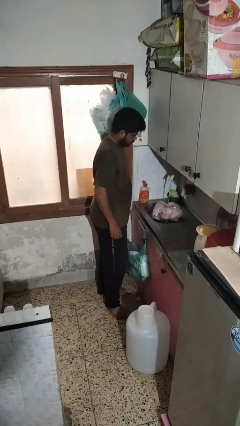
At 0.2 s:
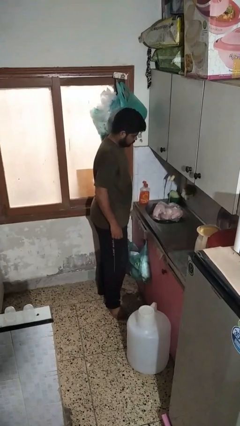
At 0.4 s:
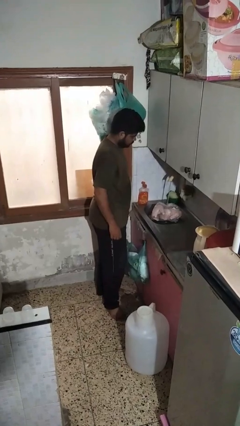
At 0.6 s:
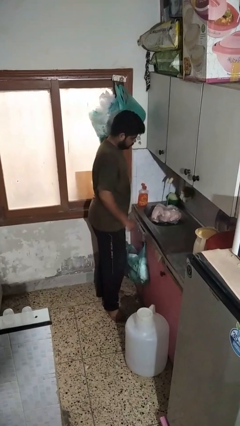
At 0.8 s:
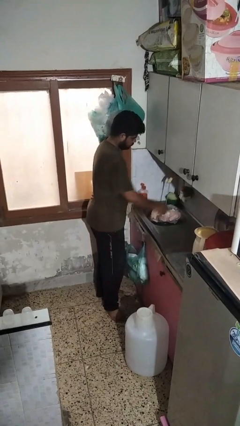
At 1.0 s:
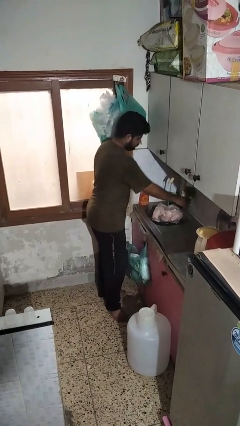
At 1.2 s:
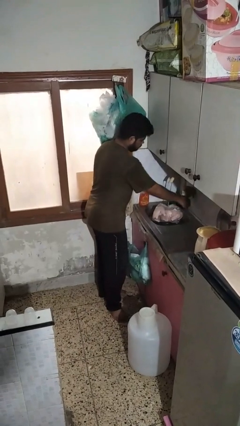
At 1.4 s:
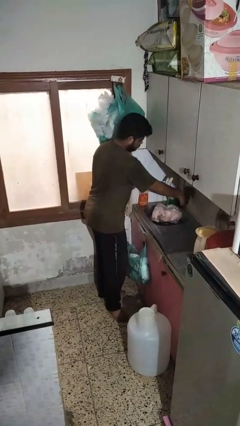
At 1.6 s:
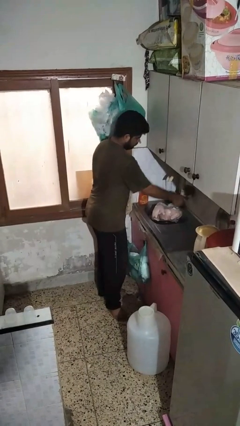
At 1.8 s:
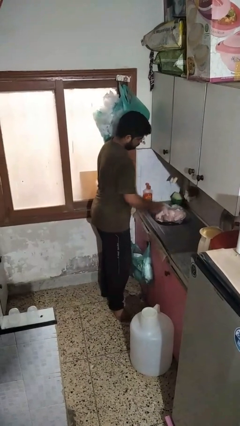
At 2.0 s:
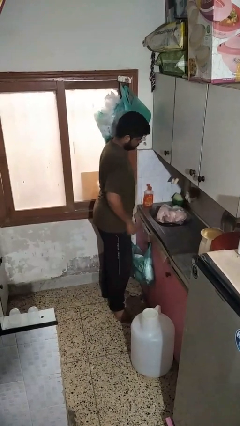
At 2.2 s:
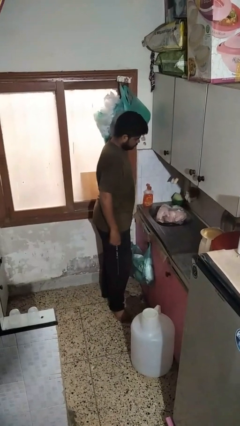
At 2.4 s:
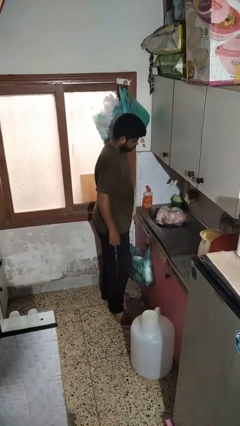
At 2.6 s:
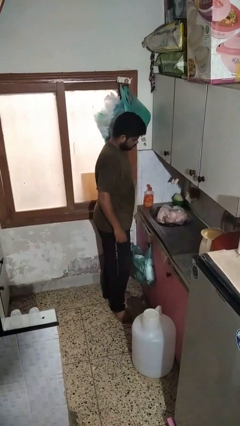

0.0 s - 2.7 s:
person turns off faucet

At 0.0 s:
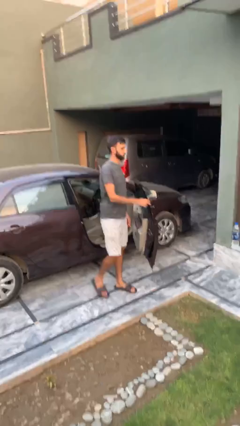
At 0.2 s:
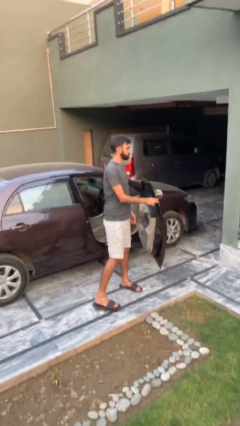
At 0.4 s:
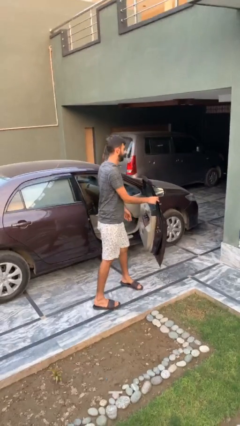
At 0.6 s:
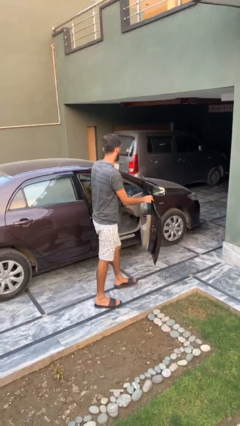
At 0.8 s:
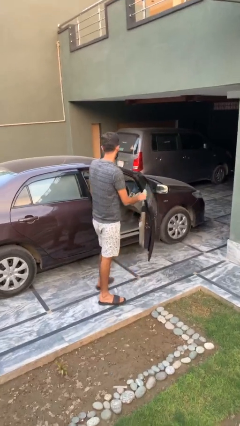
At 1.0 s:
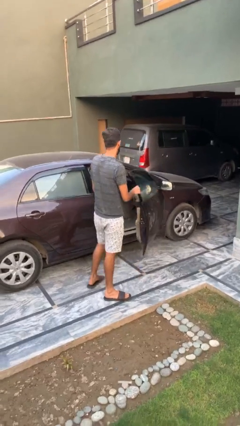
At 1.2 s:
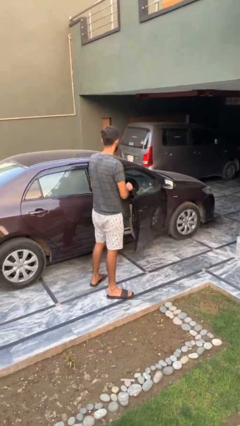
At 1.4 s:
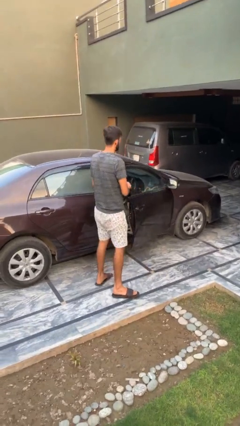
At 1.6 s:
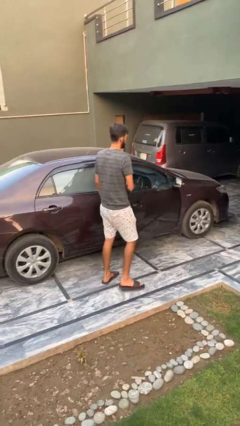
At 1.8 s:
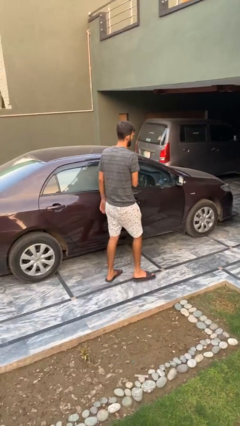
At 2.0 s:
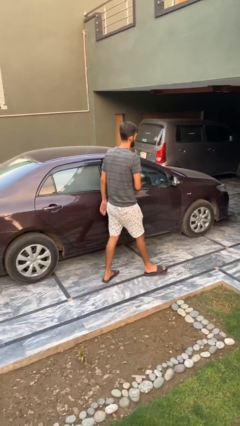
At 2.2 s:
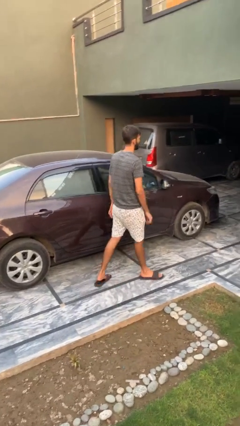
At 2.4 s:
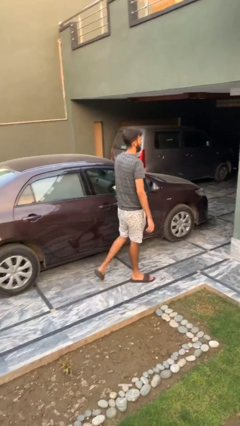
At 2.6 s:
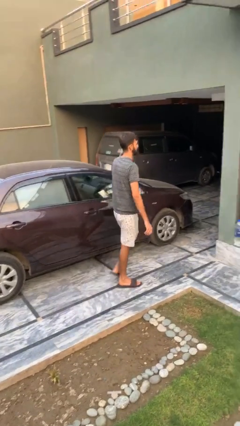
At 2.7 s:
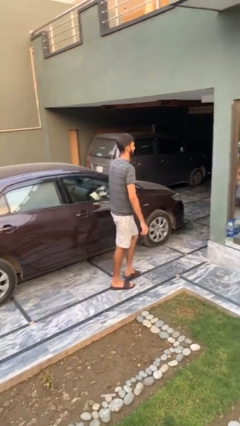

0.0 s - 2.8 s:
person closes car door

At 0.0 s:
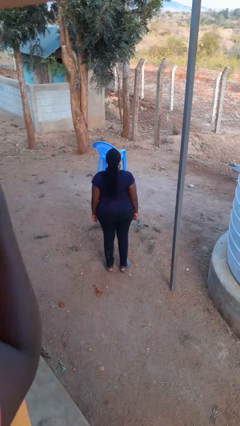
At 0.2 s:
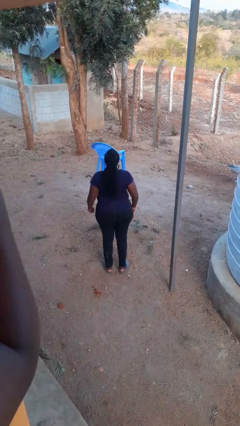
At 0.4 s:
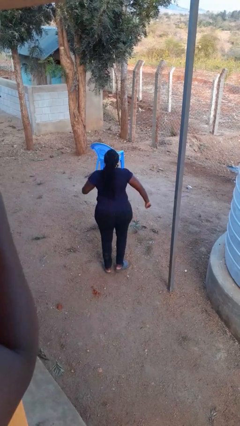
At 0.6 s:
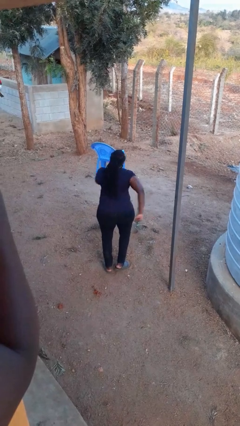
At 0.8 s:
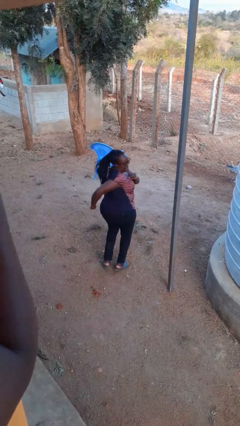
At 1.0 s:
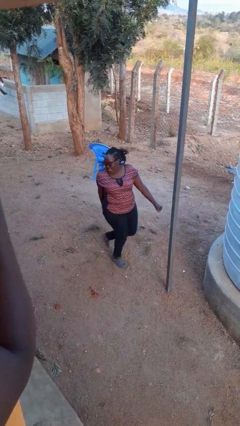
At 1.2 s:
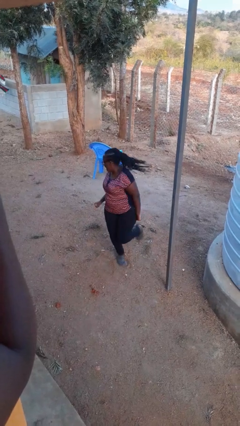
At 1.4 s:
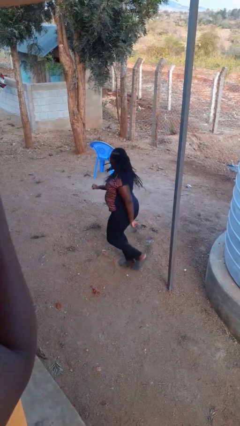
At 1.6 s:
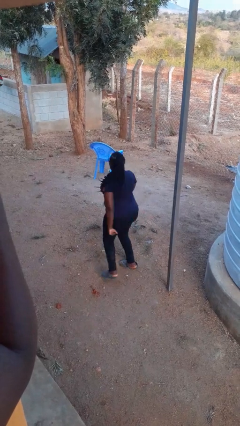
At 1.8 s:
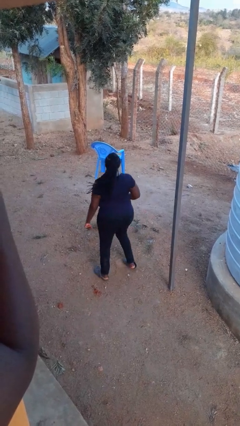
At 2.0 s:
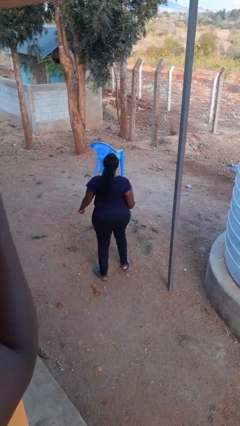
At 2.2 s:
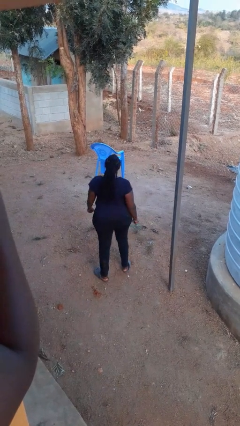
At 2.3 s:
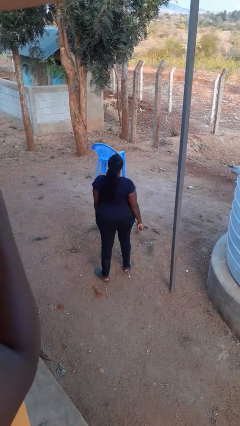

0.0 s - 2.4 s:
person twirls

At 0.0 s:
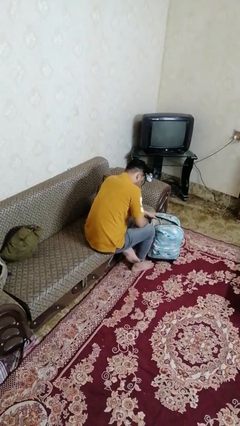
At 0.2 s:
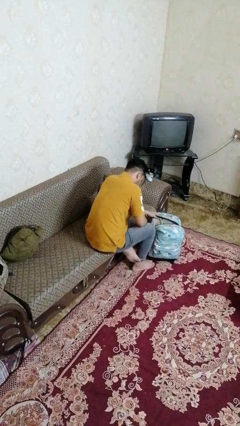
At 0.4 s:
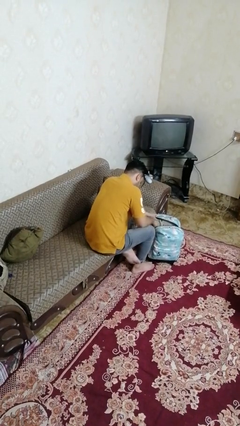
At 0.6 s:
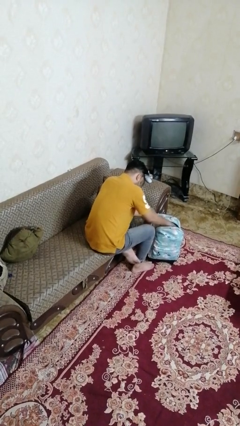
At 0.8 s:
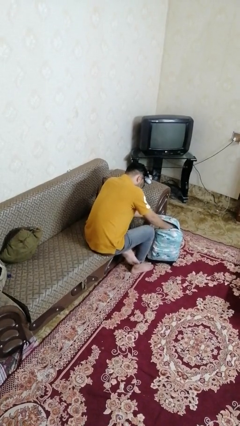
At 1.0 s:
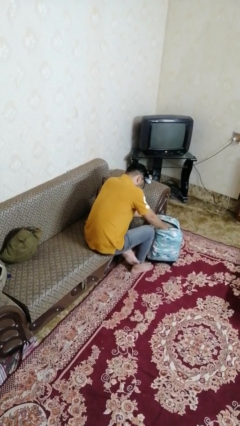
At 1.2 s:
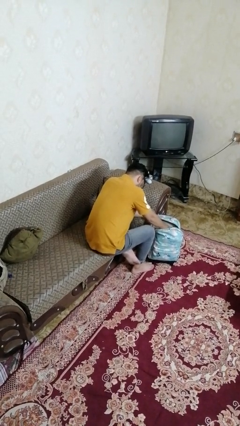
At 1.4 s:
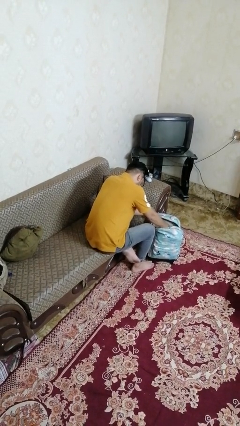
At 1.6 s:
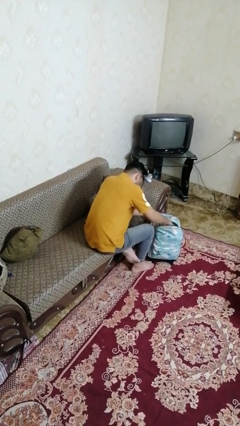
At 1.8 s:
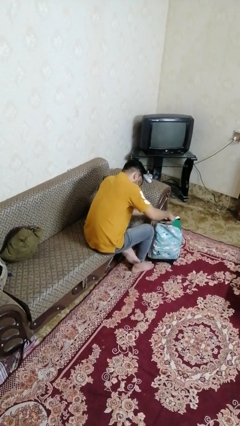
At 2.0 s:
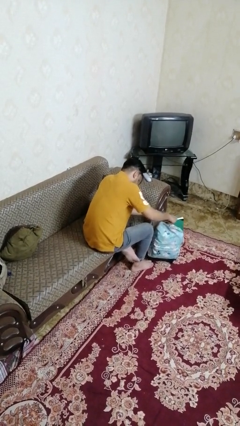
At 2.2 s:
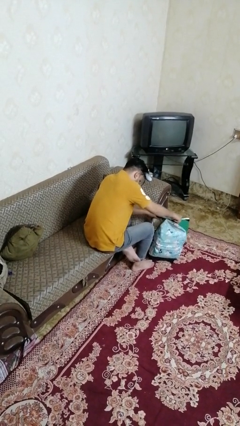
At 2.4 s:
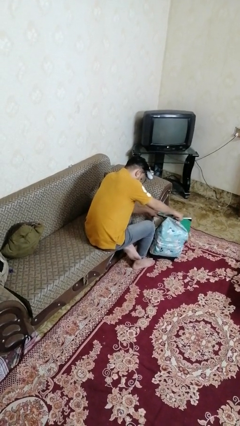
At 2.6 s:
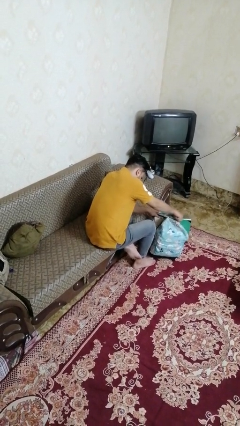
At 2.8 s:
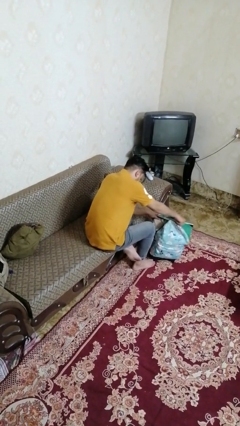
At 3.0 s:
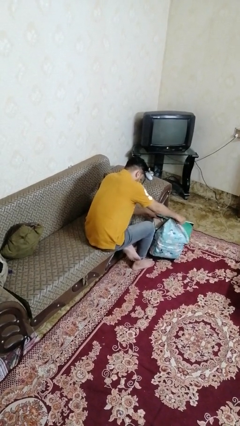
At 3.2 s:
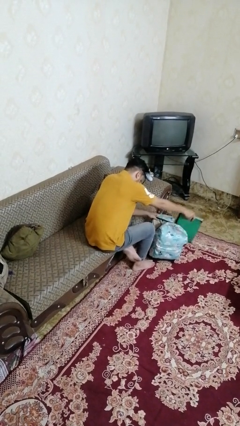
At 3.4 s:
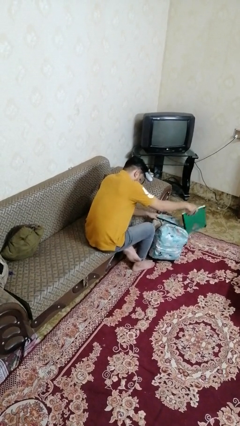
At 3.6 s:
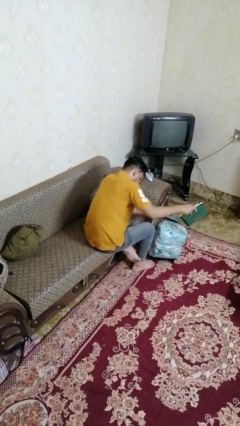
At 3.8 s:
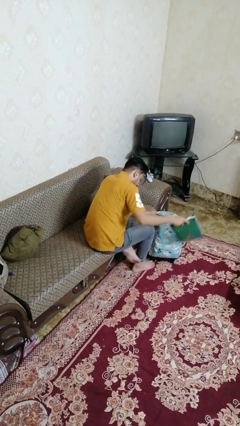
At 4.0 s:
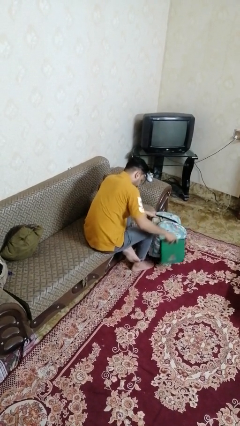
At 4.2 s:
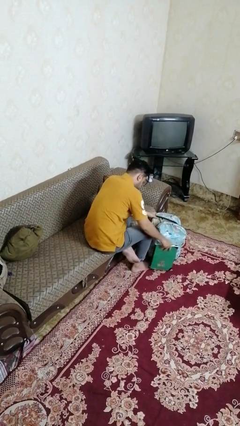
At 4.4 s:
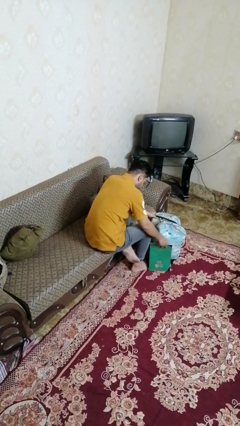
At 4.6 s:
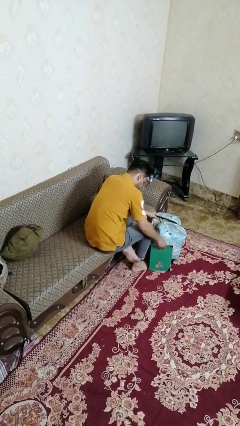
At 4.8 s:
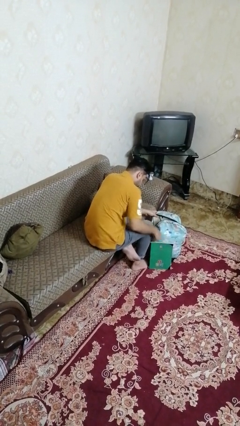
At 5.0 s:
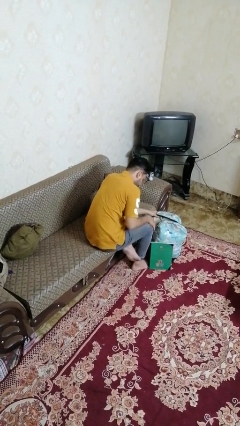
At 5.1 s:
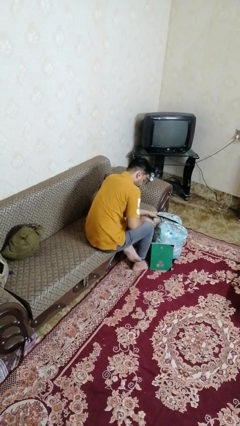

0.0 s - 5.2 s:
person takes object from bag

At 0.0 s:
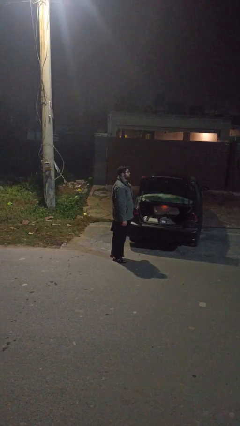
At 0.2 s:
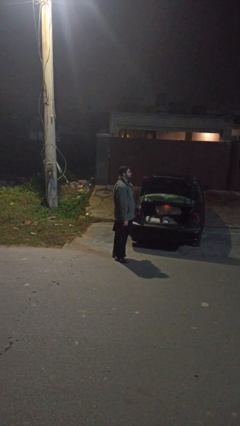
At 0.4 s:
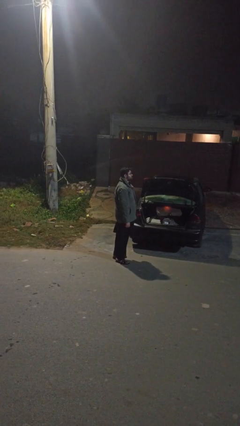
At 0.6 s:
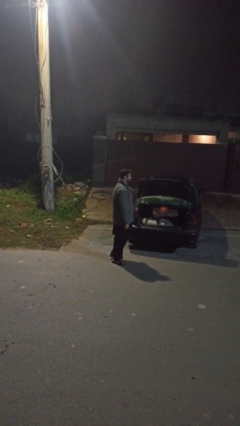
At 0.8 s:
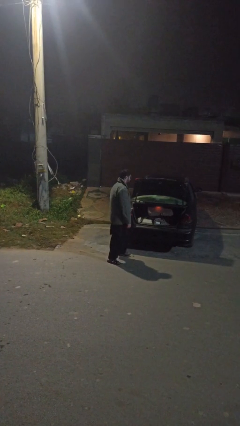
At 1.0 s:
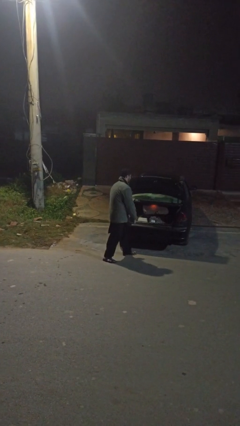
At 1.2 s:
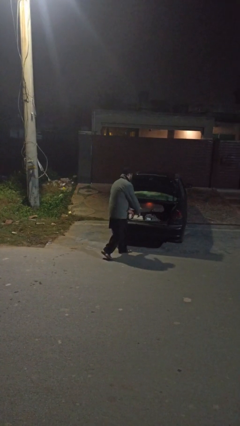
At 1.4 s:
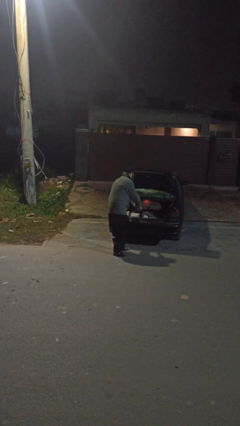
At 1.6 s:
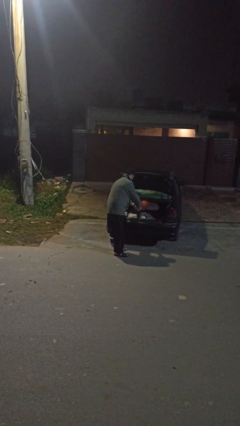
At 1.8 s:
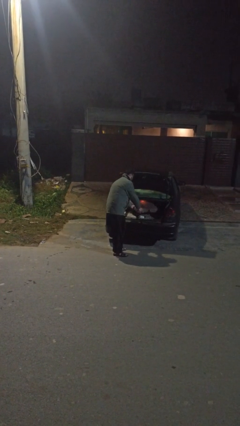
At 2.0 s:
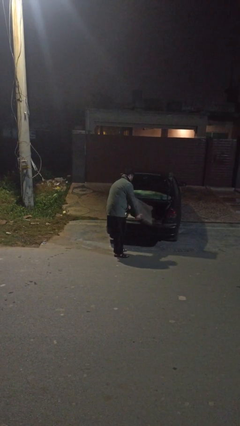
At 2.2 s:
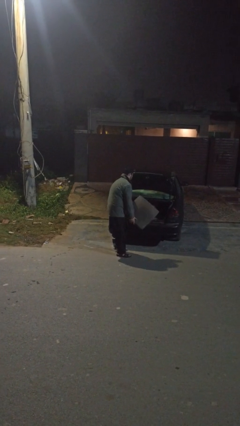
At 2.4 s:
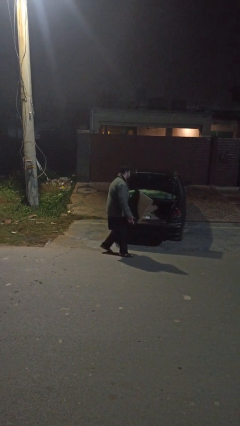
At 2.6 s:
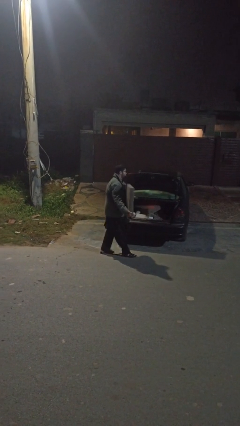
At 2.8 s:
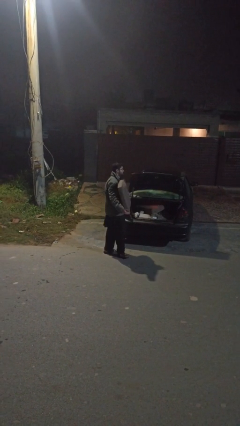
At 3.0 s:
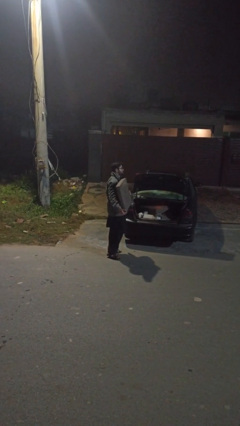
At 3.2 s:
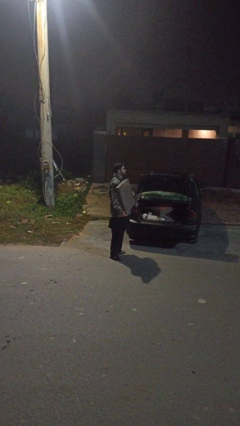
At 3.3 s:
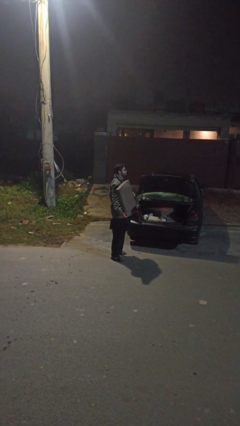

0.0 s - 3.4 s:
person unloads car

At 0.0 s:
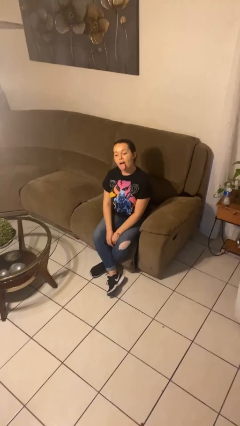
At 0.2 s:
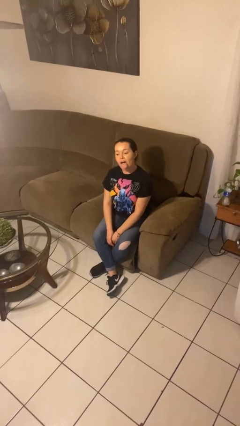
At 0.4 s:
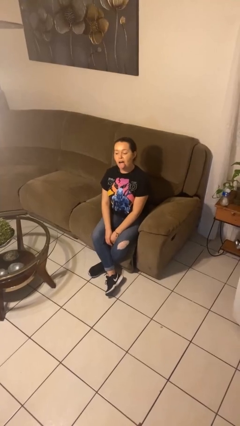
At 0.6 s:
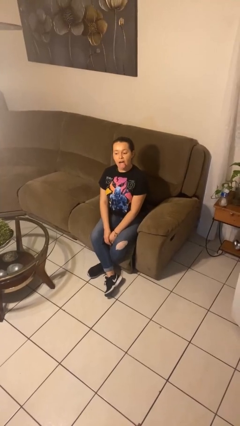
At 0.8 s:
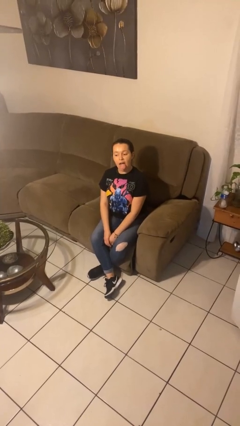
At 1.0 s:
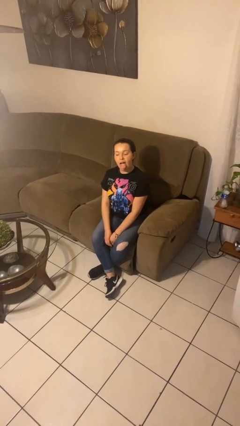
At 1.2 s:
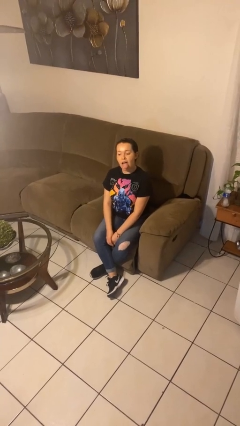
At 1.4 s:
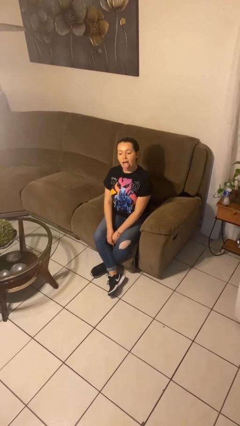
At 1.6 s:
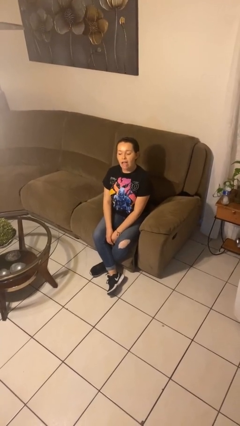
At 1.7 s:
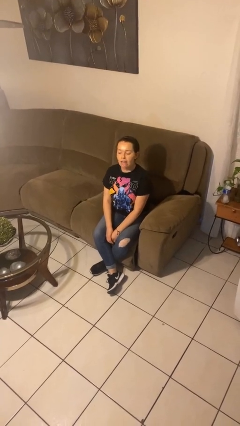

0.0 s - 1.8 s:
person sticks out tongue
